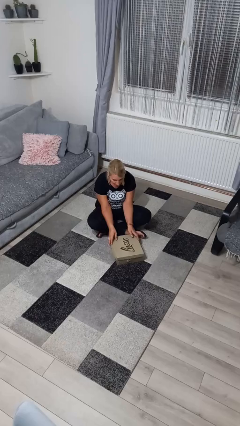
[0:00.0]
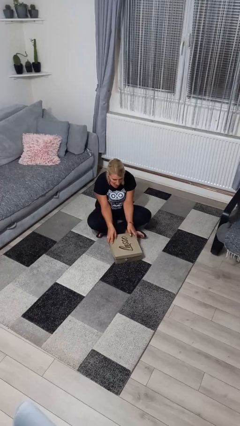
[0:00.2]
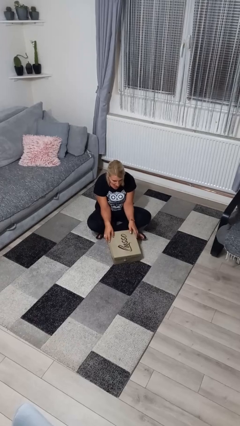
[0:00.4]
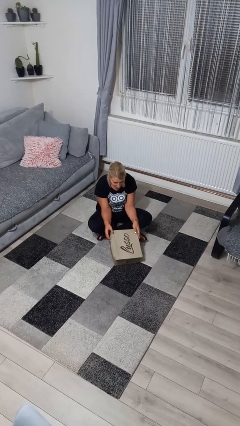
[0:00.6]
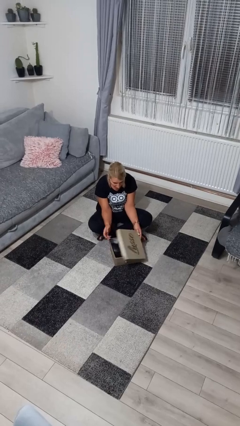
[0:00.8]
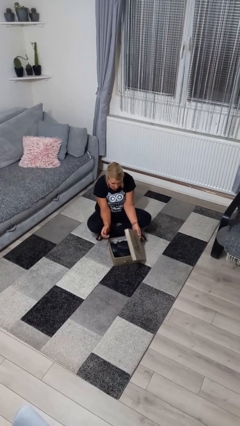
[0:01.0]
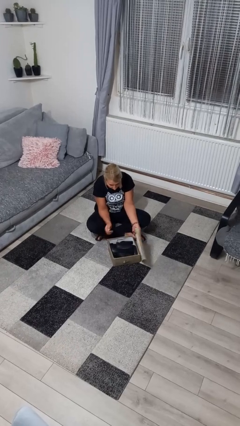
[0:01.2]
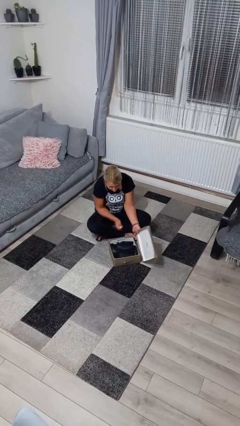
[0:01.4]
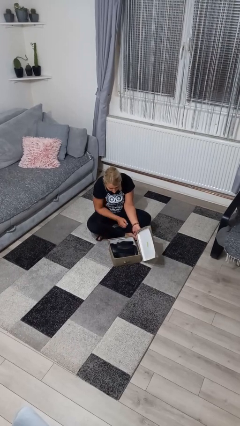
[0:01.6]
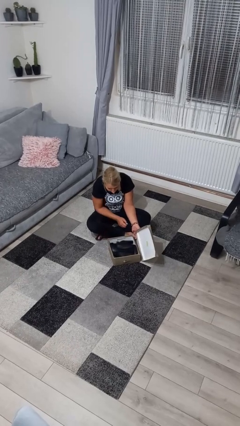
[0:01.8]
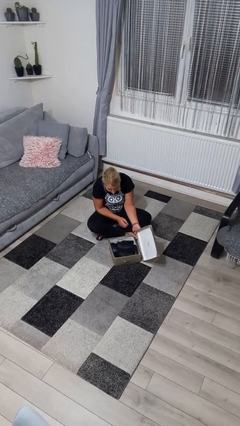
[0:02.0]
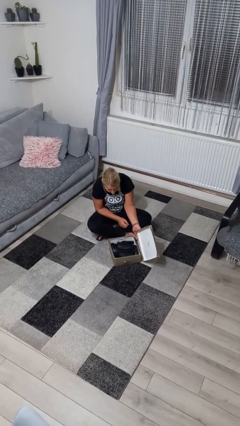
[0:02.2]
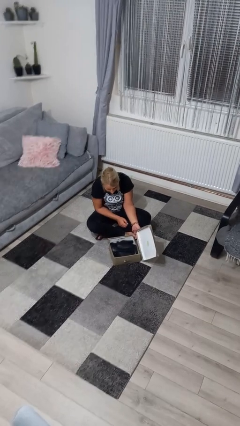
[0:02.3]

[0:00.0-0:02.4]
person opens box

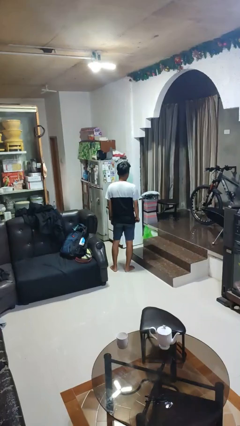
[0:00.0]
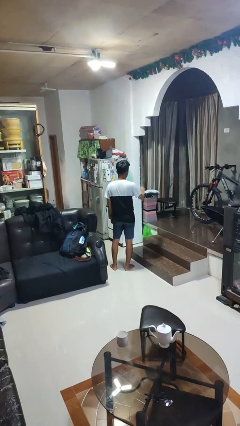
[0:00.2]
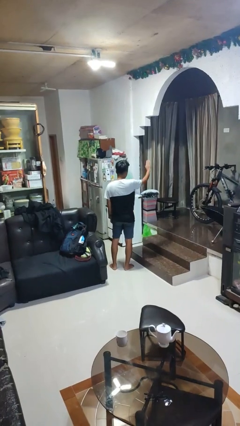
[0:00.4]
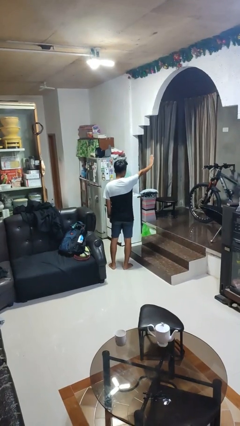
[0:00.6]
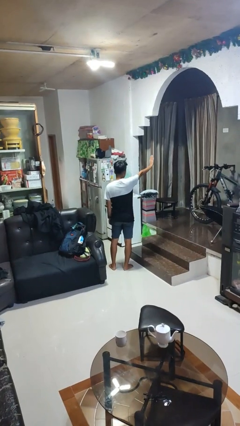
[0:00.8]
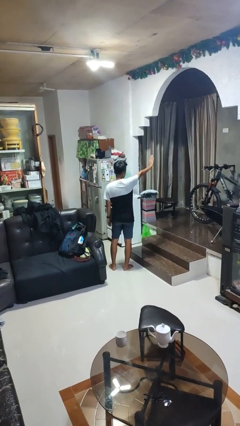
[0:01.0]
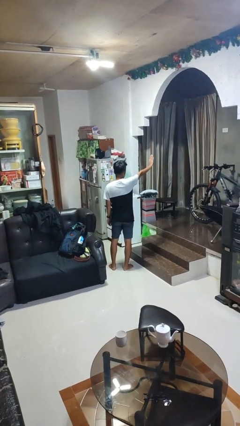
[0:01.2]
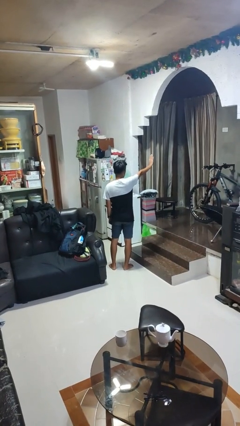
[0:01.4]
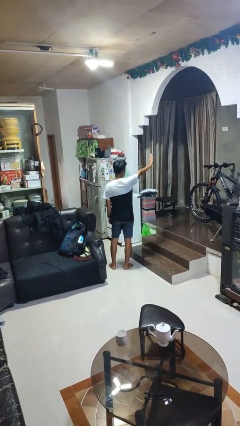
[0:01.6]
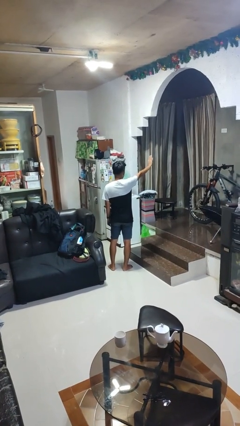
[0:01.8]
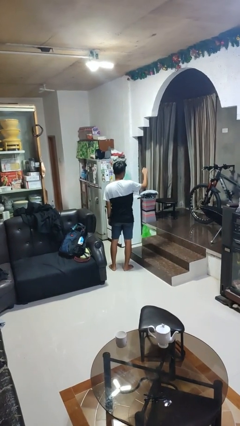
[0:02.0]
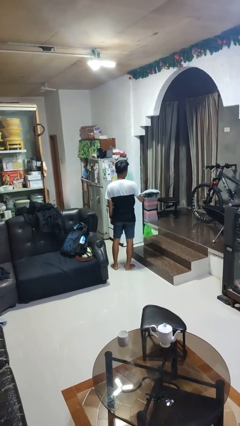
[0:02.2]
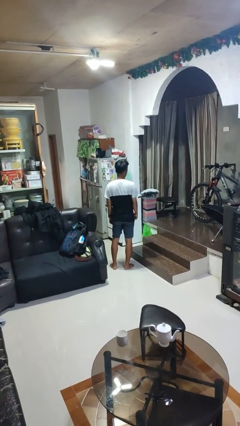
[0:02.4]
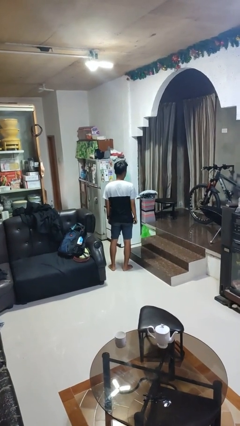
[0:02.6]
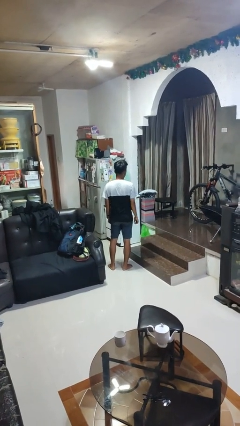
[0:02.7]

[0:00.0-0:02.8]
person gestures stop

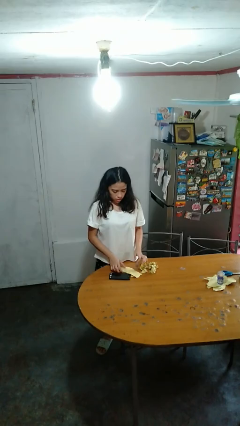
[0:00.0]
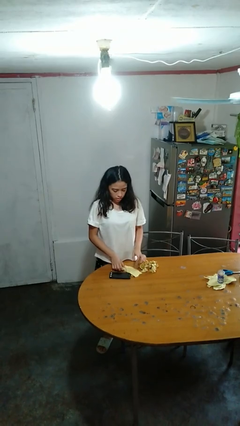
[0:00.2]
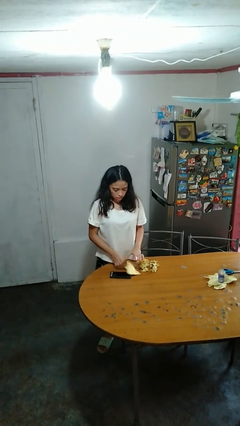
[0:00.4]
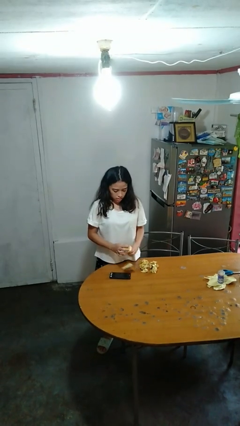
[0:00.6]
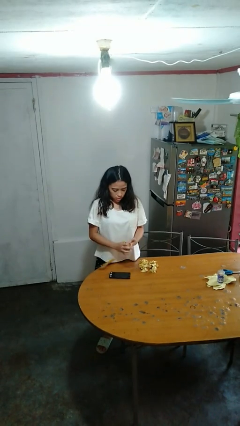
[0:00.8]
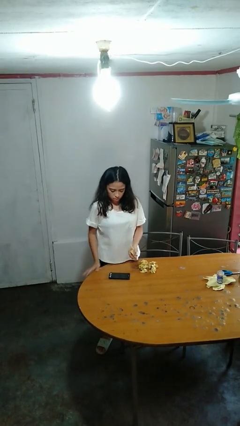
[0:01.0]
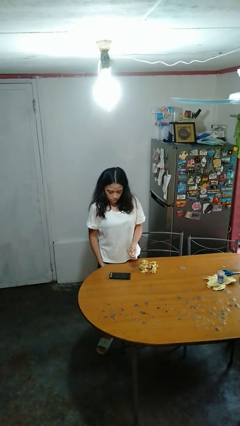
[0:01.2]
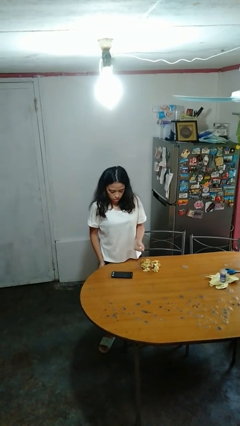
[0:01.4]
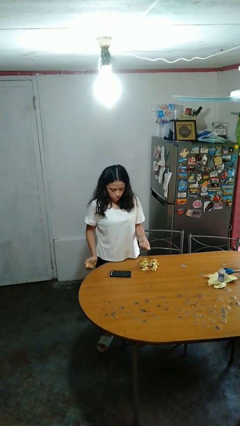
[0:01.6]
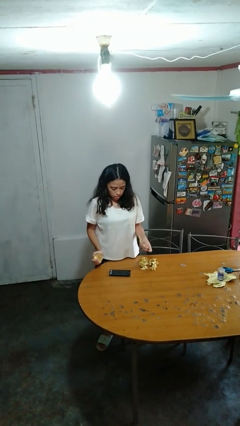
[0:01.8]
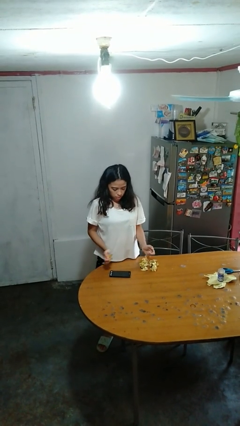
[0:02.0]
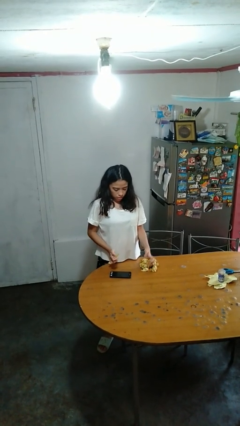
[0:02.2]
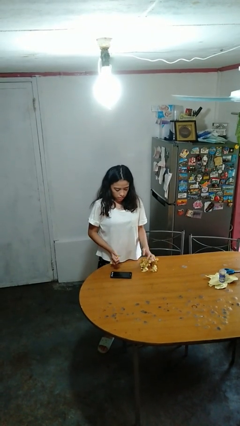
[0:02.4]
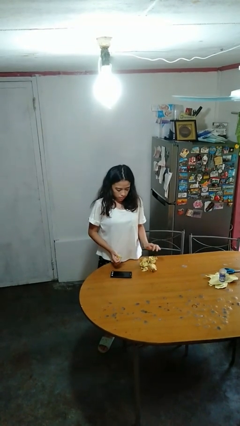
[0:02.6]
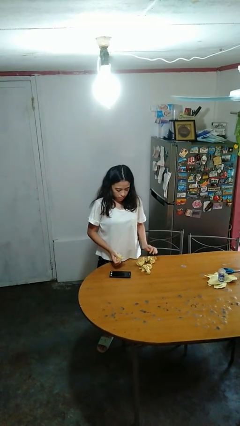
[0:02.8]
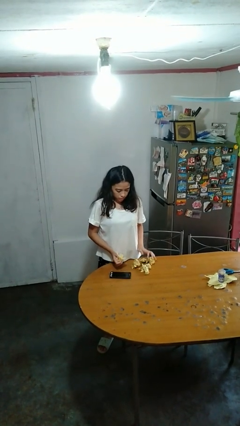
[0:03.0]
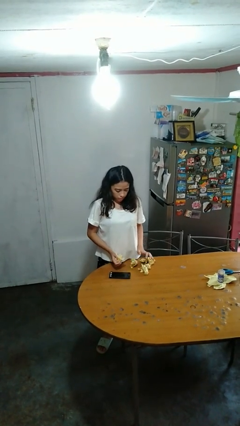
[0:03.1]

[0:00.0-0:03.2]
person crumples paper

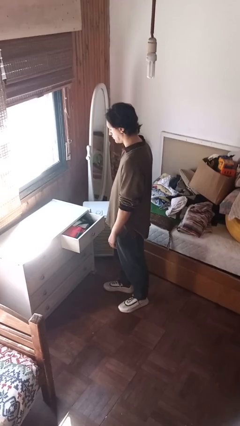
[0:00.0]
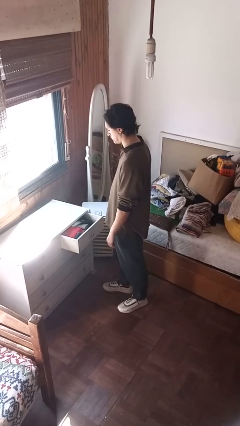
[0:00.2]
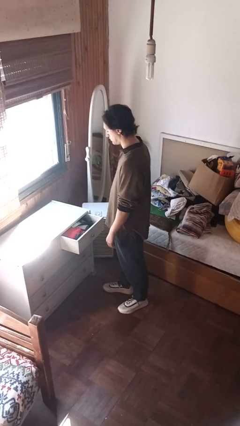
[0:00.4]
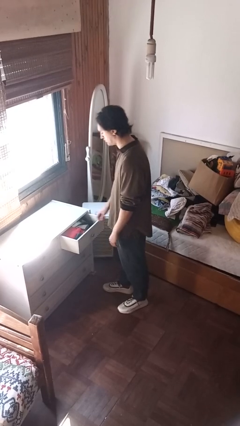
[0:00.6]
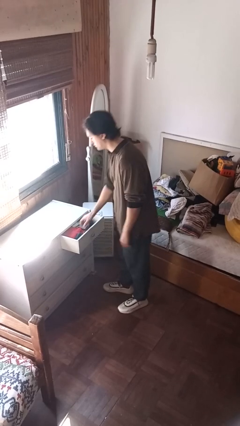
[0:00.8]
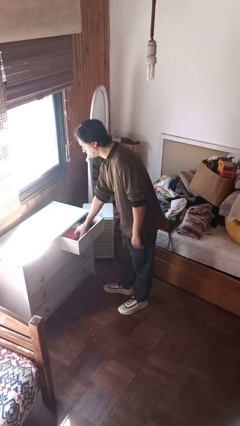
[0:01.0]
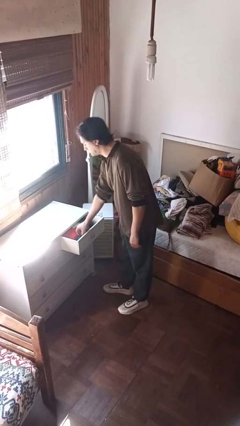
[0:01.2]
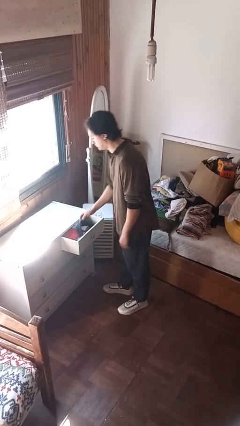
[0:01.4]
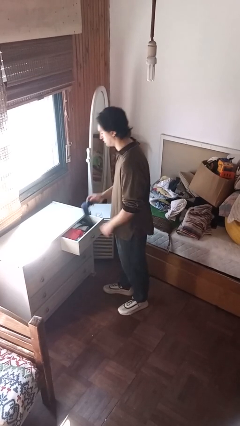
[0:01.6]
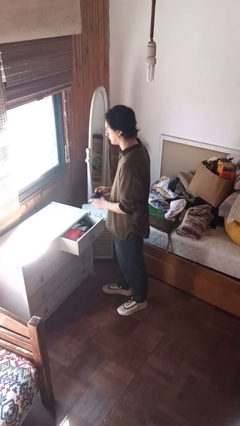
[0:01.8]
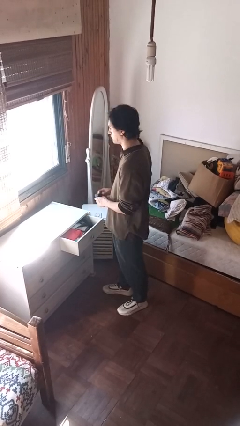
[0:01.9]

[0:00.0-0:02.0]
person takes clothes from dresser

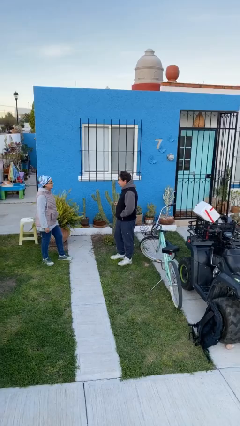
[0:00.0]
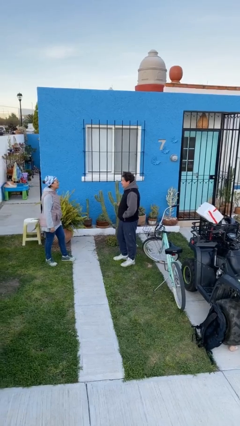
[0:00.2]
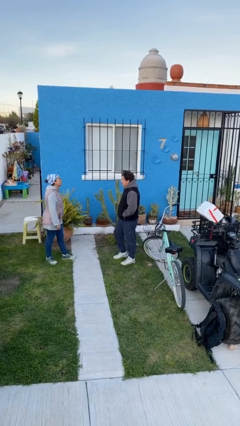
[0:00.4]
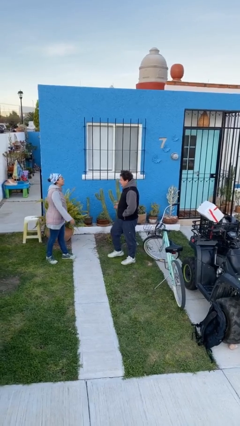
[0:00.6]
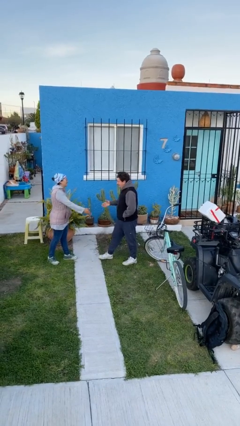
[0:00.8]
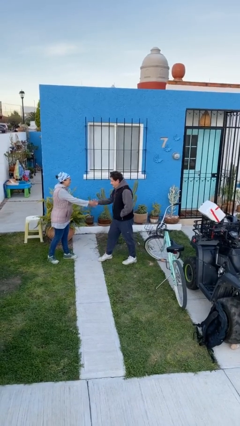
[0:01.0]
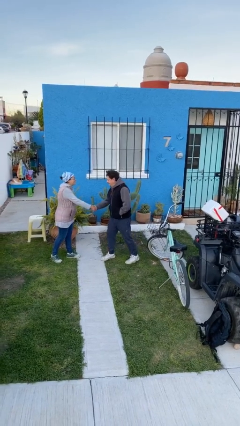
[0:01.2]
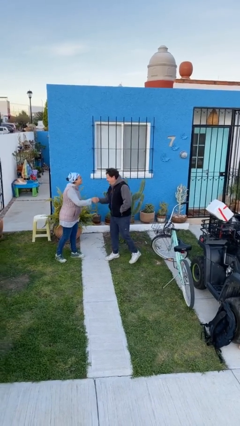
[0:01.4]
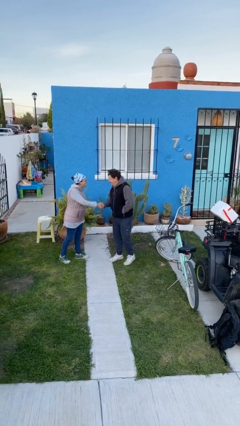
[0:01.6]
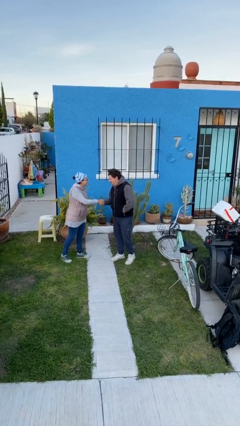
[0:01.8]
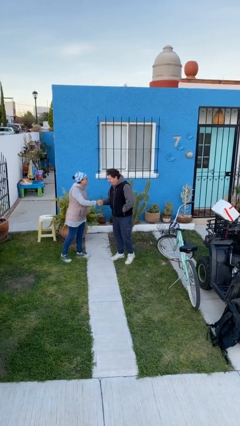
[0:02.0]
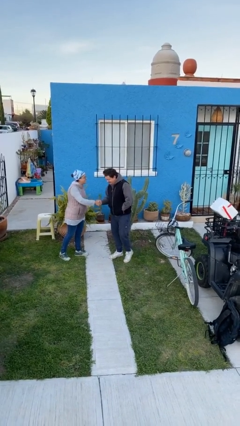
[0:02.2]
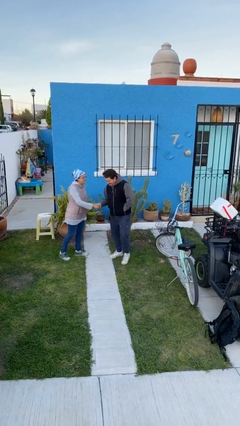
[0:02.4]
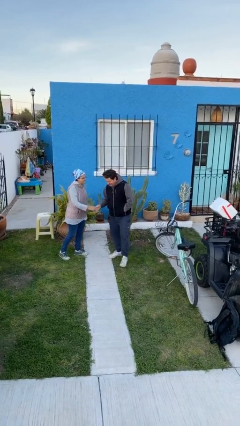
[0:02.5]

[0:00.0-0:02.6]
person shakes hand

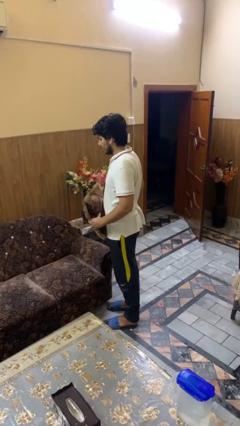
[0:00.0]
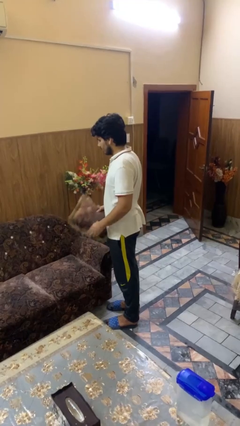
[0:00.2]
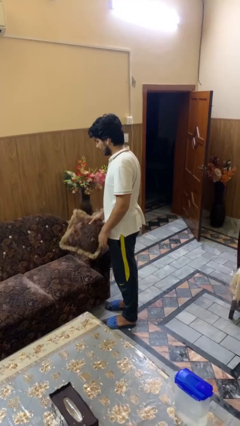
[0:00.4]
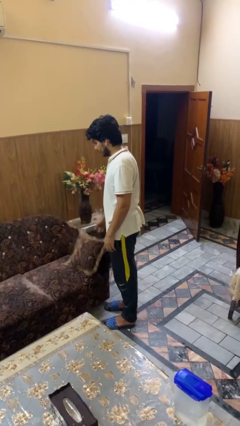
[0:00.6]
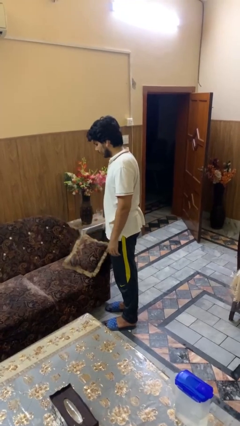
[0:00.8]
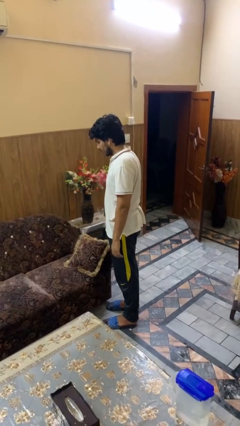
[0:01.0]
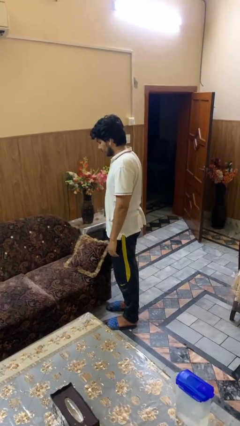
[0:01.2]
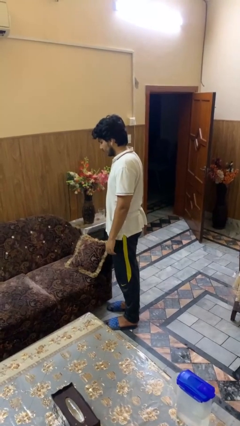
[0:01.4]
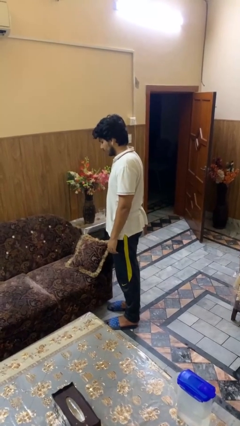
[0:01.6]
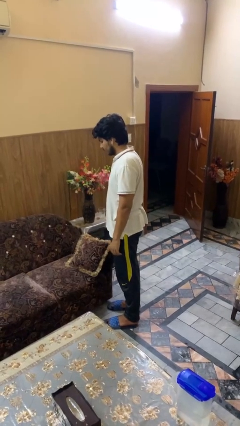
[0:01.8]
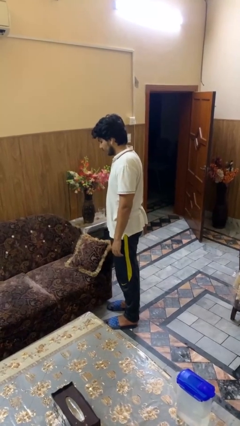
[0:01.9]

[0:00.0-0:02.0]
person puts down object on couch

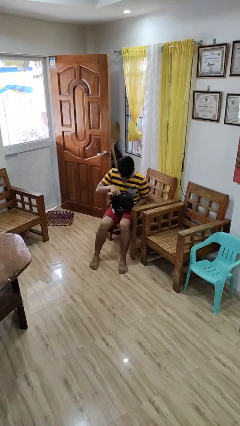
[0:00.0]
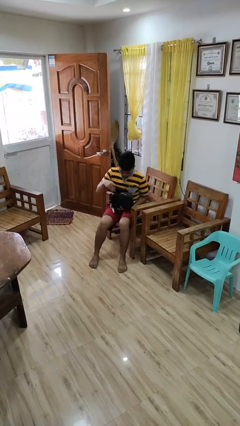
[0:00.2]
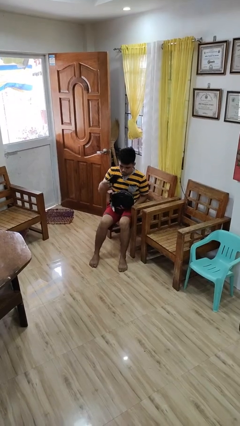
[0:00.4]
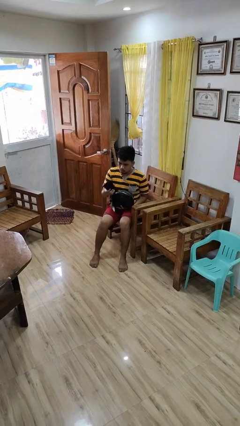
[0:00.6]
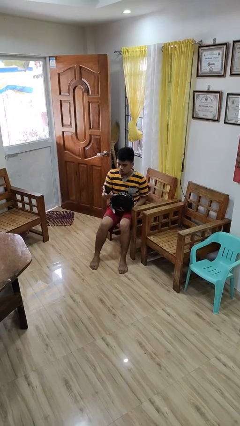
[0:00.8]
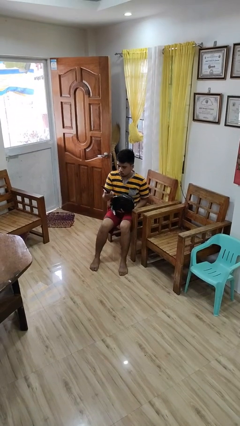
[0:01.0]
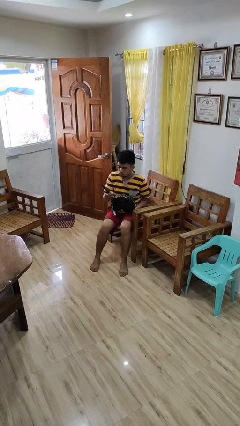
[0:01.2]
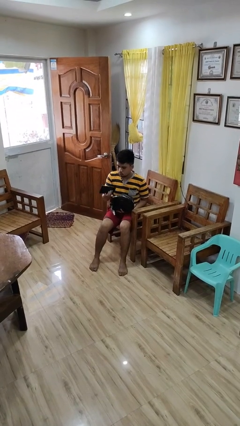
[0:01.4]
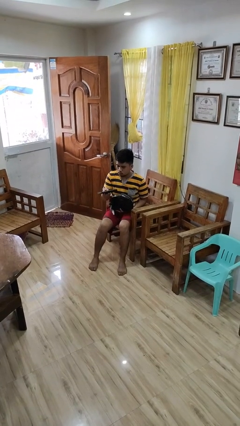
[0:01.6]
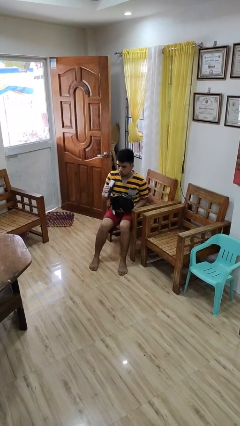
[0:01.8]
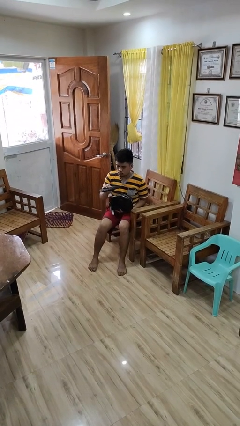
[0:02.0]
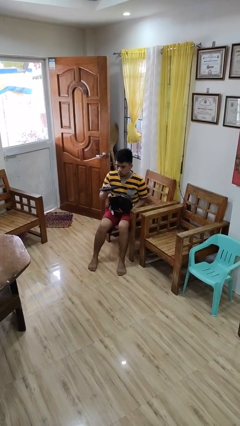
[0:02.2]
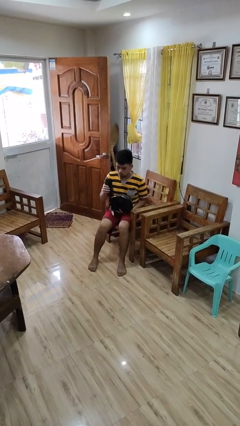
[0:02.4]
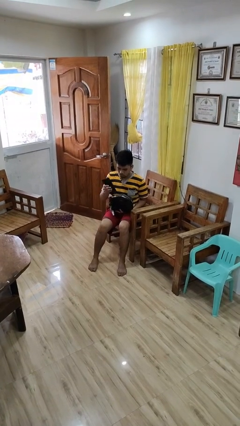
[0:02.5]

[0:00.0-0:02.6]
person takes object from purse
